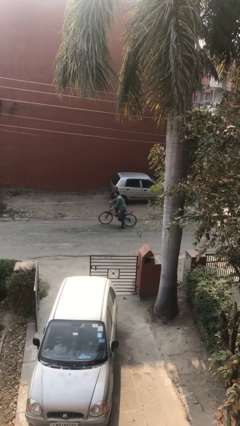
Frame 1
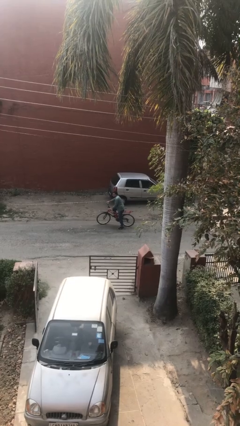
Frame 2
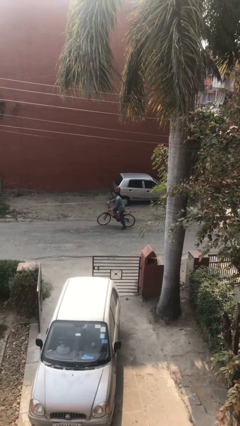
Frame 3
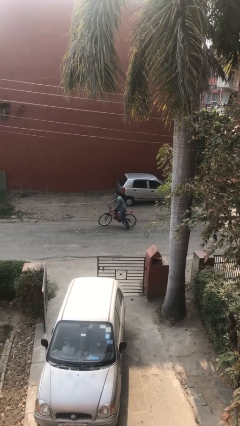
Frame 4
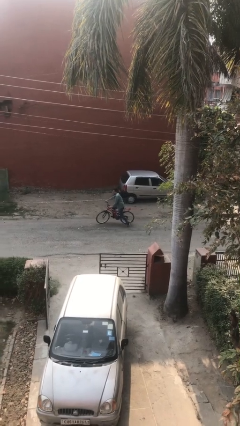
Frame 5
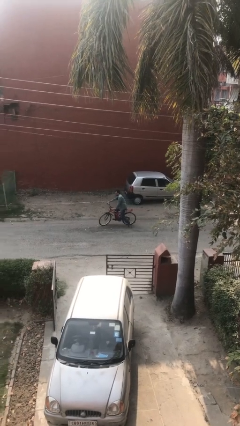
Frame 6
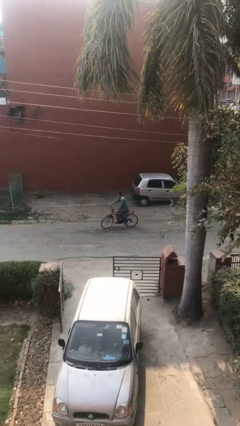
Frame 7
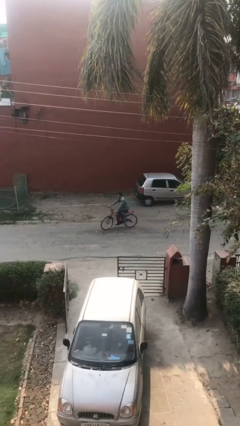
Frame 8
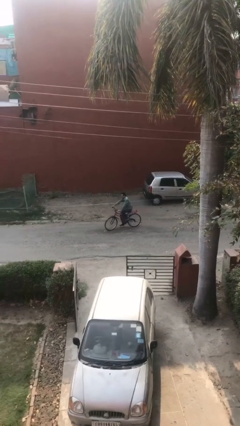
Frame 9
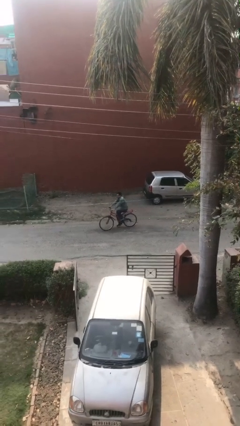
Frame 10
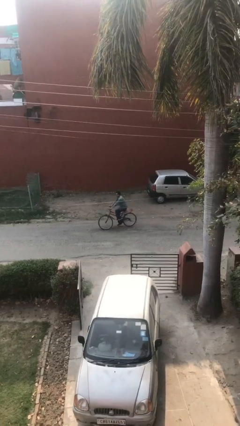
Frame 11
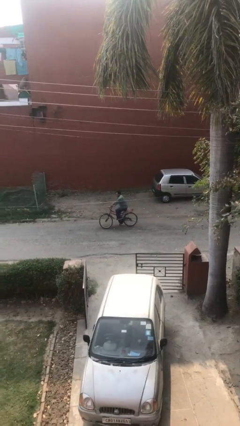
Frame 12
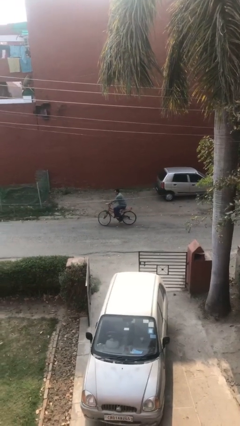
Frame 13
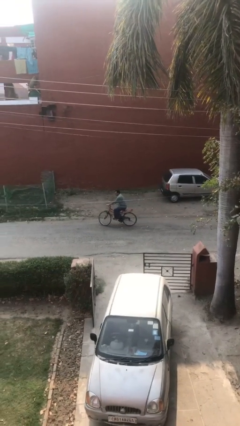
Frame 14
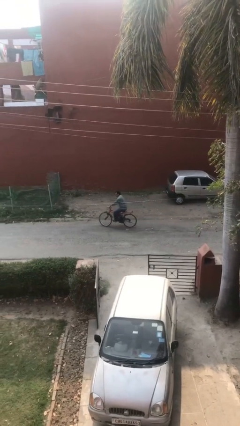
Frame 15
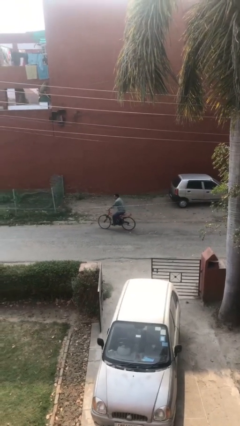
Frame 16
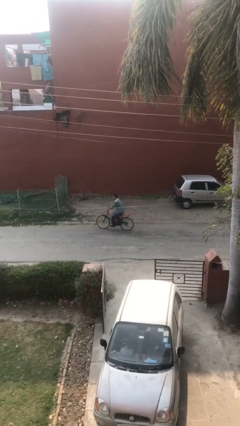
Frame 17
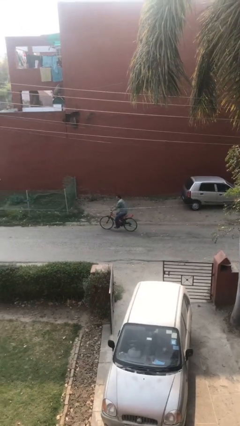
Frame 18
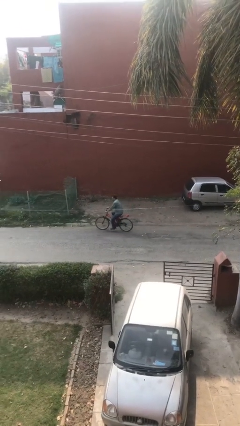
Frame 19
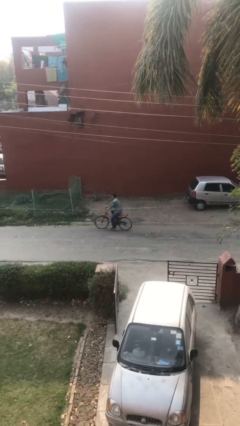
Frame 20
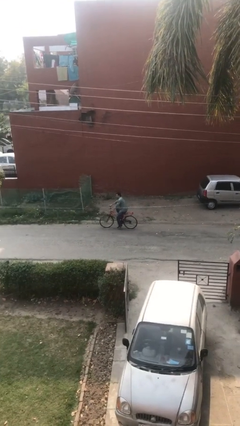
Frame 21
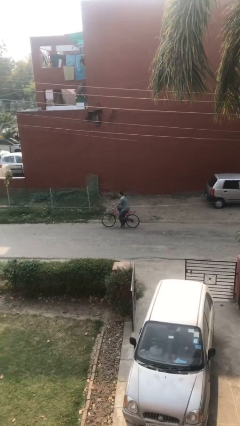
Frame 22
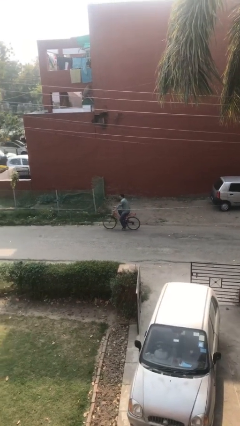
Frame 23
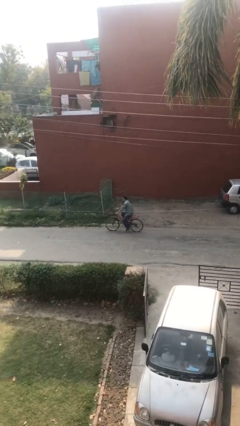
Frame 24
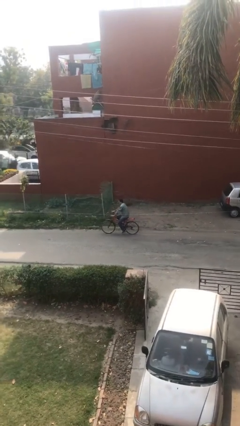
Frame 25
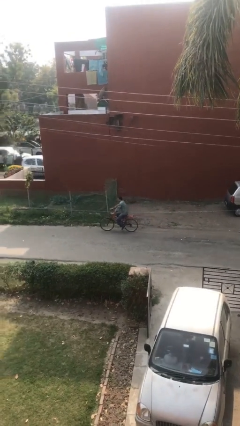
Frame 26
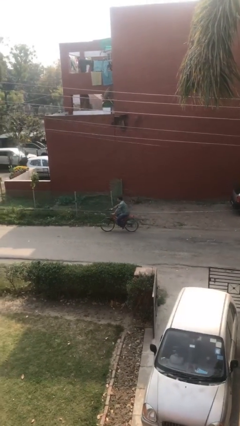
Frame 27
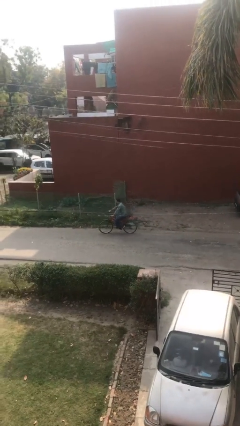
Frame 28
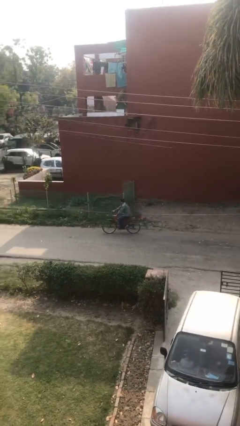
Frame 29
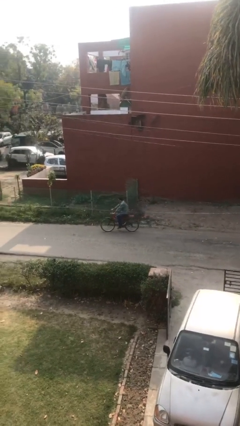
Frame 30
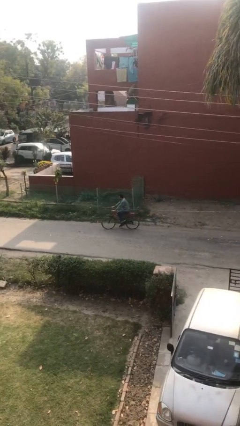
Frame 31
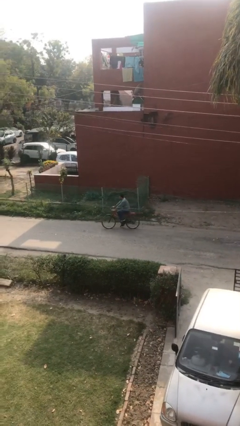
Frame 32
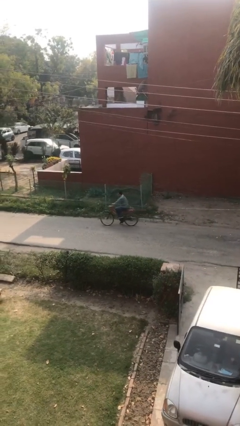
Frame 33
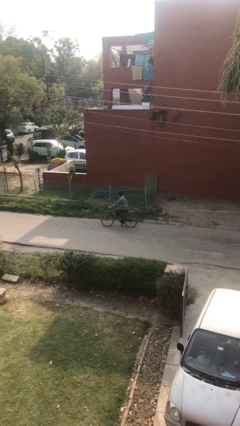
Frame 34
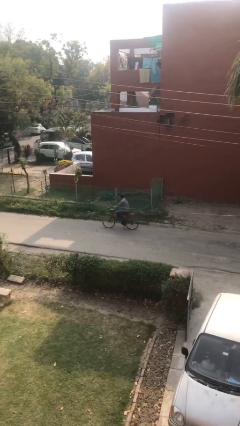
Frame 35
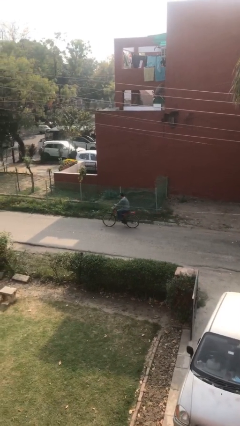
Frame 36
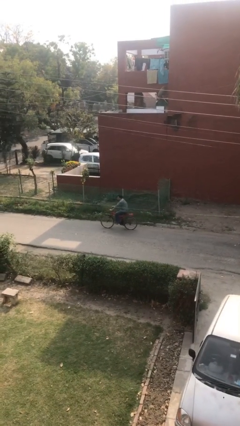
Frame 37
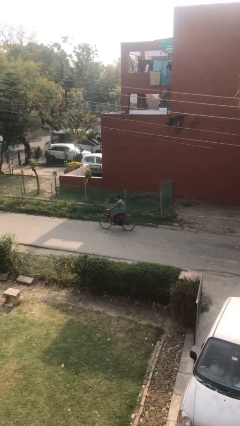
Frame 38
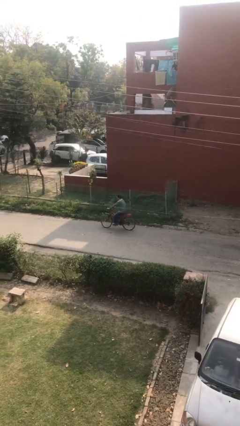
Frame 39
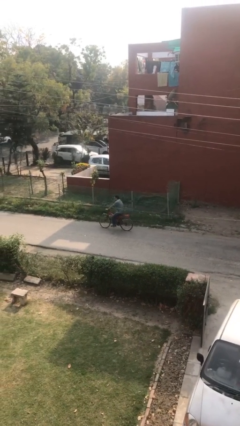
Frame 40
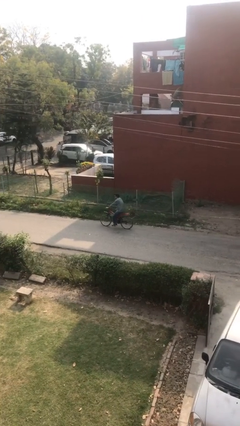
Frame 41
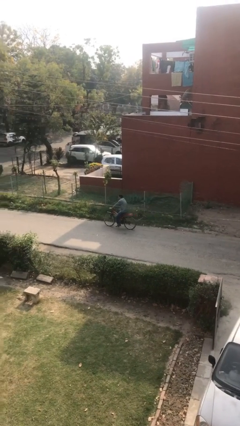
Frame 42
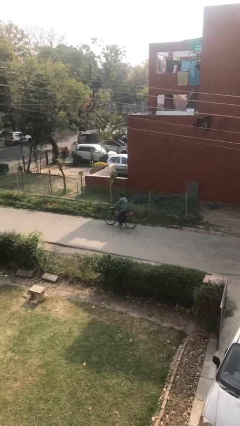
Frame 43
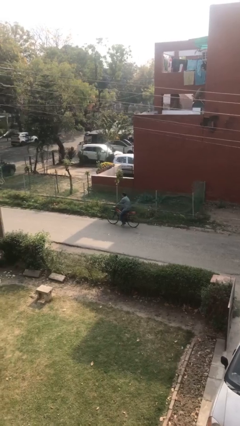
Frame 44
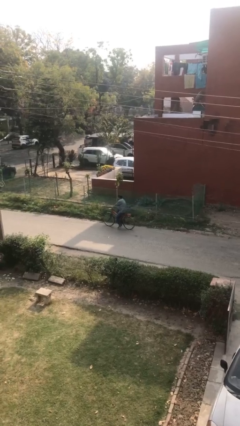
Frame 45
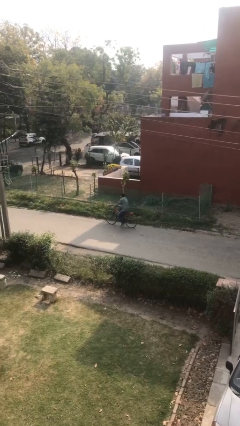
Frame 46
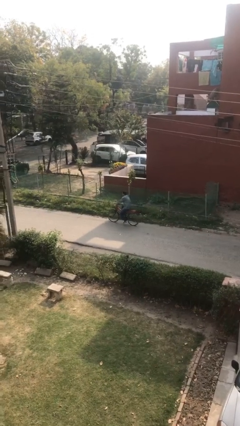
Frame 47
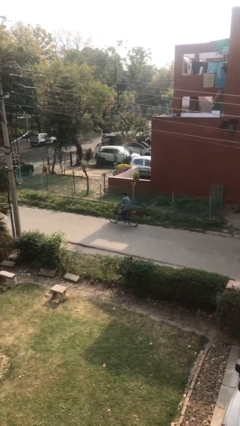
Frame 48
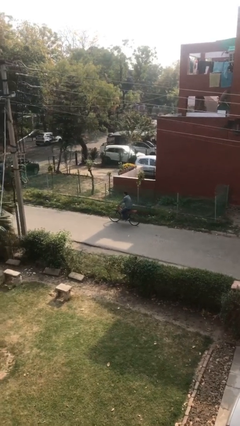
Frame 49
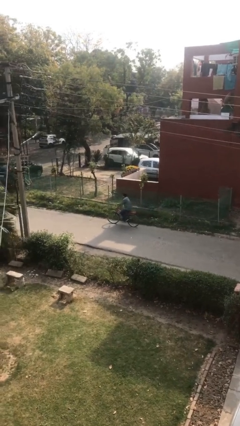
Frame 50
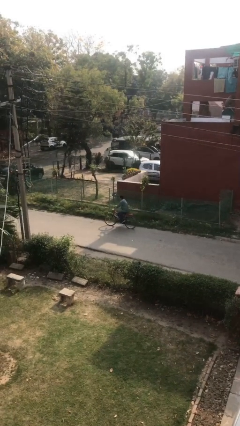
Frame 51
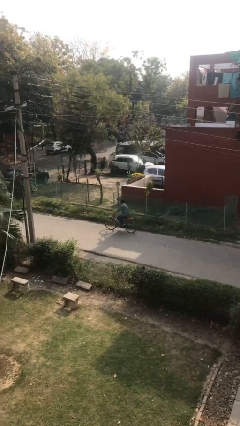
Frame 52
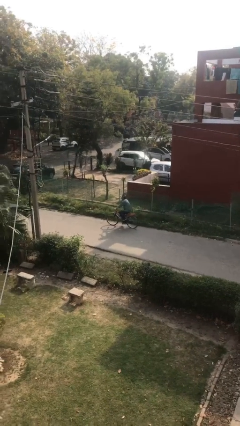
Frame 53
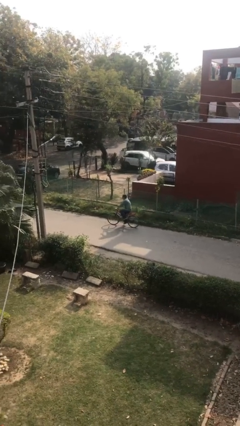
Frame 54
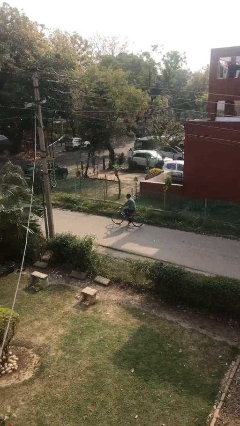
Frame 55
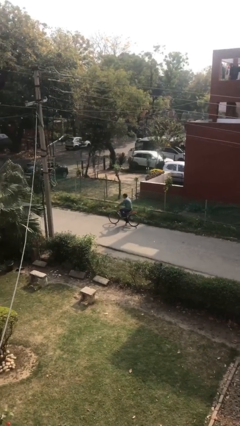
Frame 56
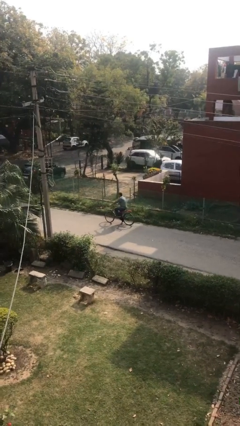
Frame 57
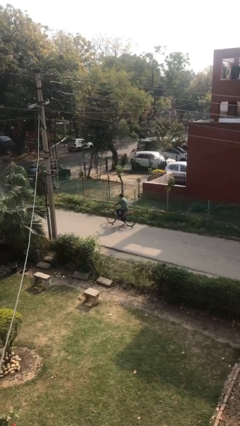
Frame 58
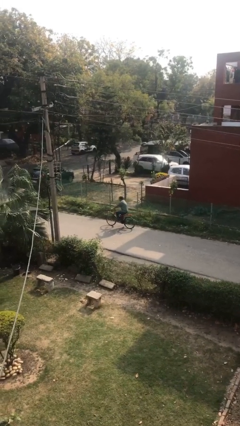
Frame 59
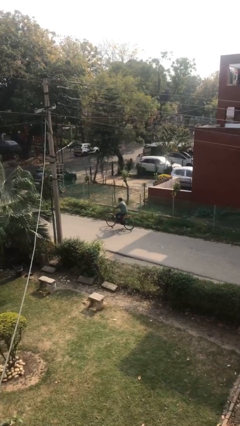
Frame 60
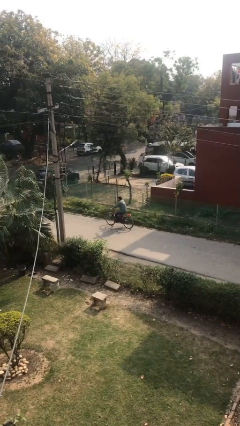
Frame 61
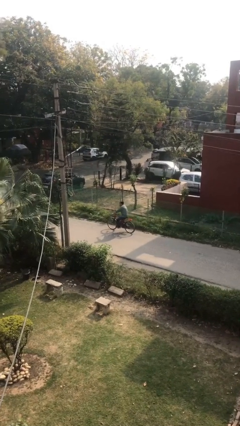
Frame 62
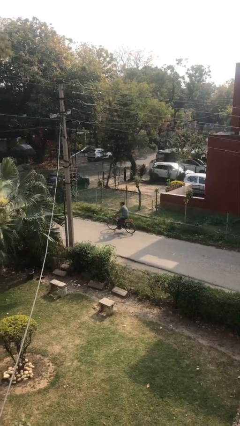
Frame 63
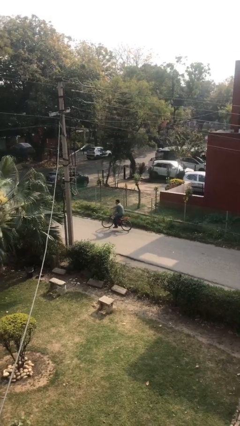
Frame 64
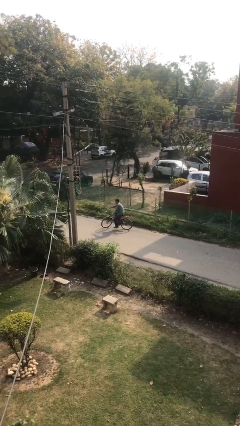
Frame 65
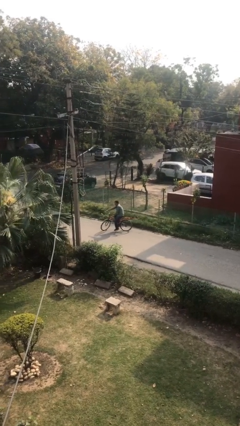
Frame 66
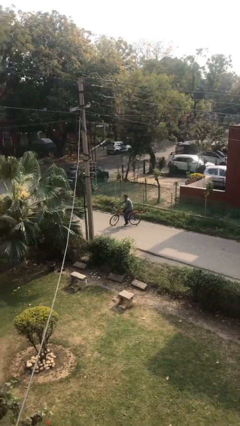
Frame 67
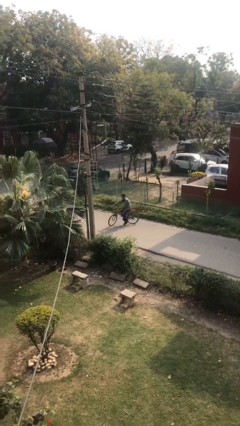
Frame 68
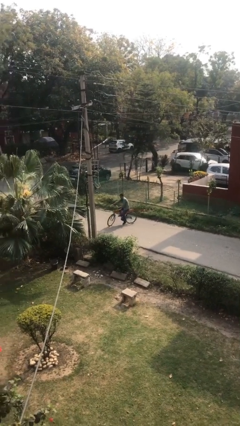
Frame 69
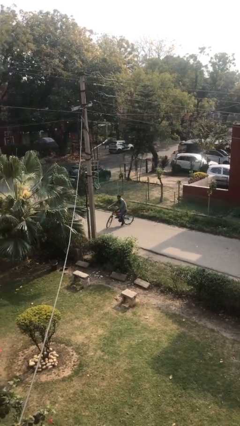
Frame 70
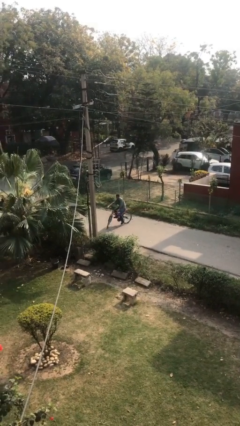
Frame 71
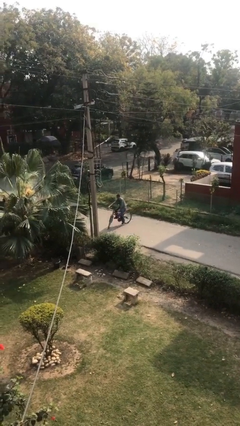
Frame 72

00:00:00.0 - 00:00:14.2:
person rides bicycle

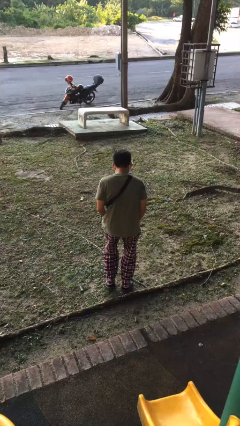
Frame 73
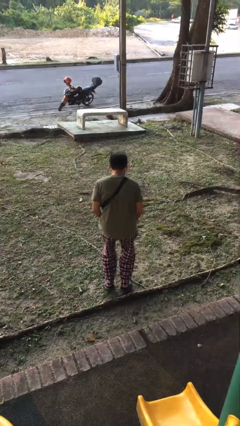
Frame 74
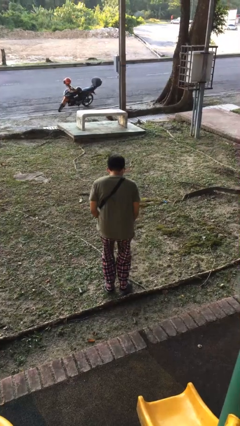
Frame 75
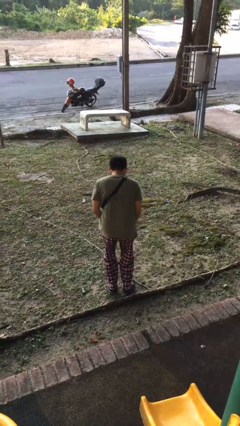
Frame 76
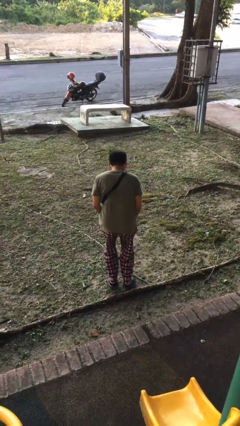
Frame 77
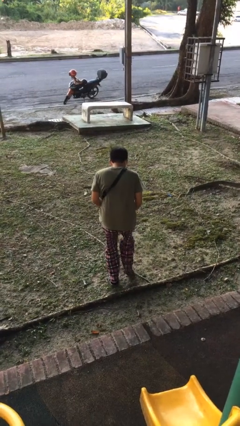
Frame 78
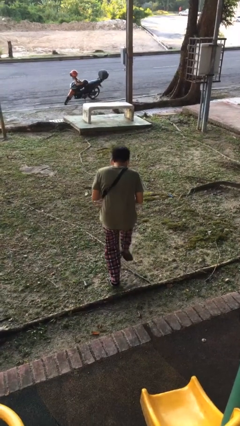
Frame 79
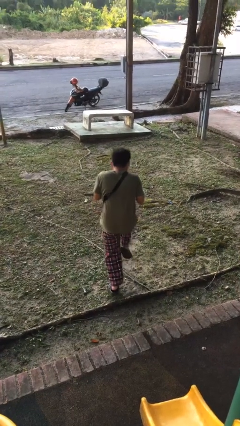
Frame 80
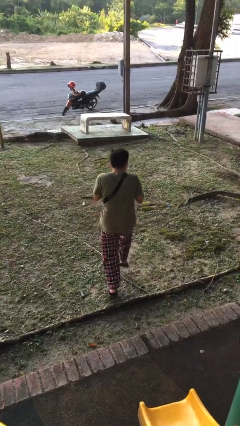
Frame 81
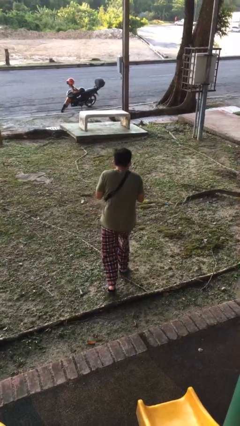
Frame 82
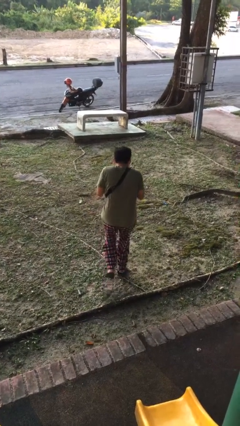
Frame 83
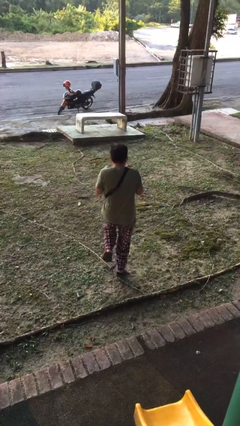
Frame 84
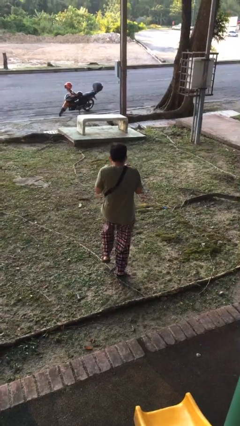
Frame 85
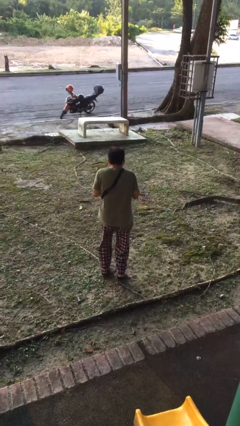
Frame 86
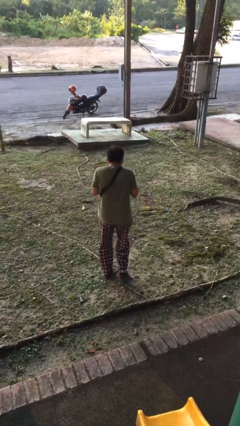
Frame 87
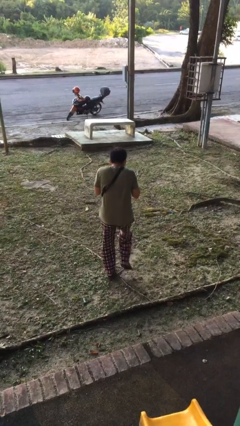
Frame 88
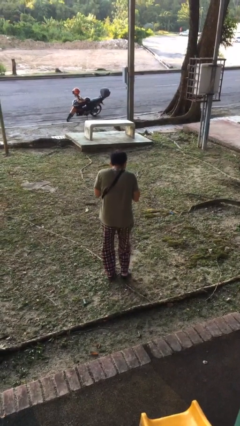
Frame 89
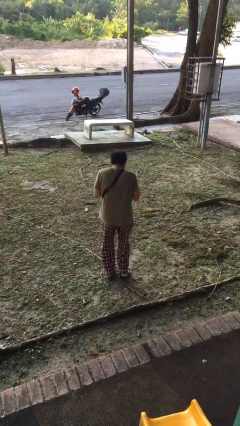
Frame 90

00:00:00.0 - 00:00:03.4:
person walks tiptoe
